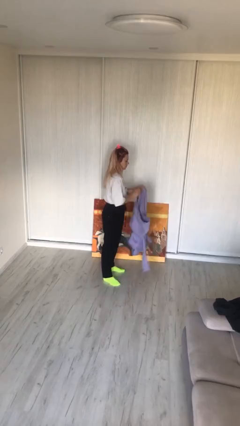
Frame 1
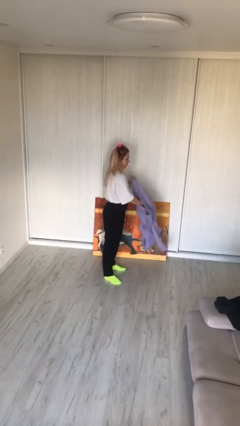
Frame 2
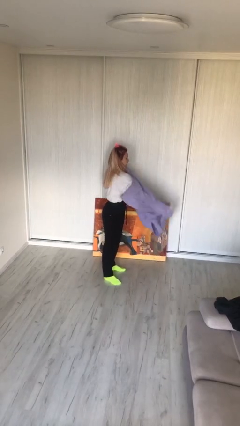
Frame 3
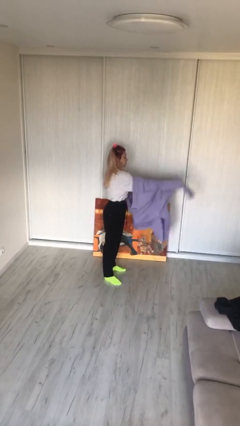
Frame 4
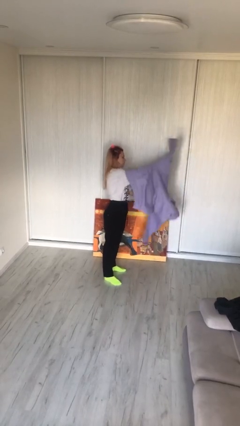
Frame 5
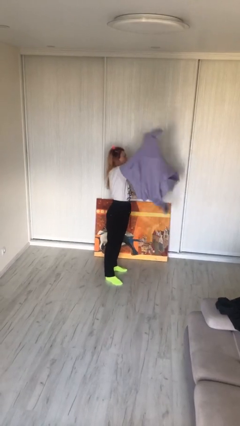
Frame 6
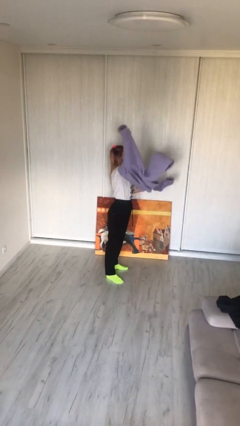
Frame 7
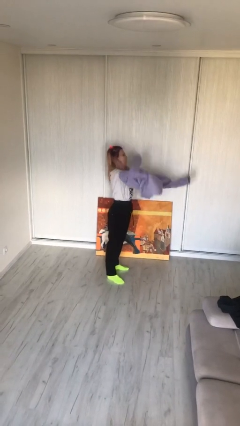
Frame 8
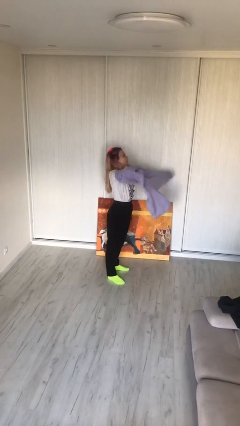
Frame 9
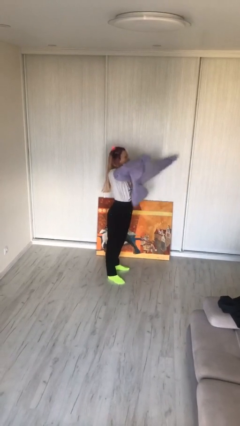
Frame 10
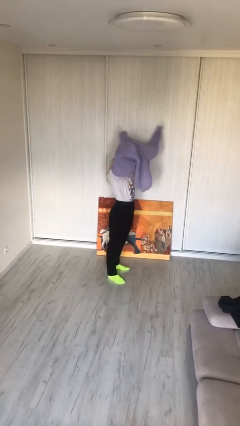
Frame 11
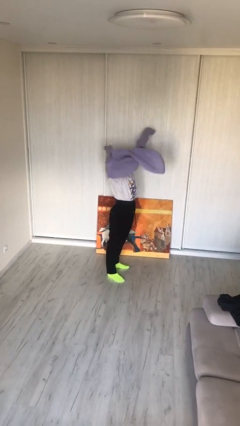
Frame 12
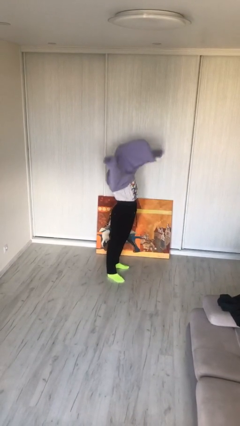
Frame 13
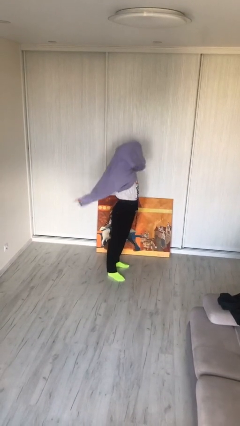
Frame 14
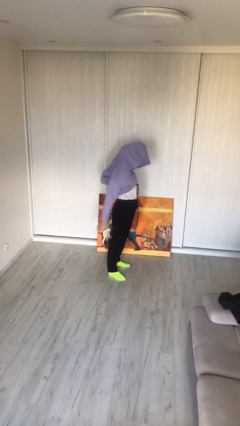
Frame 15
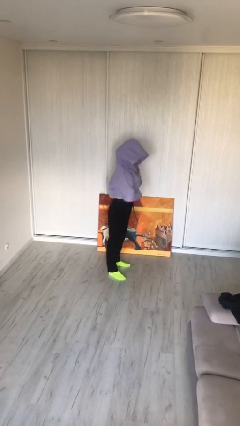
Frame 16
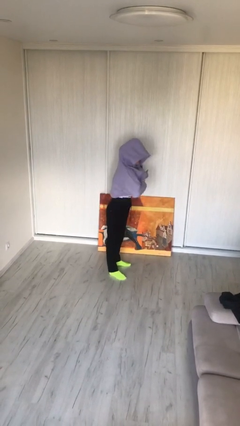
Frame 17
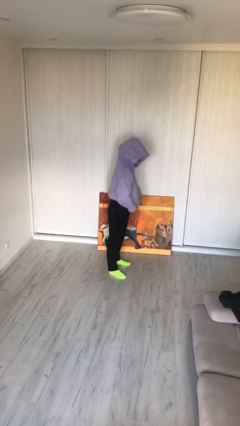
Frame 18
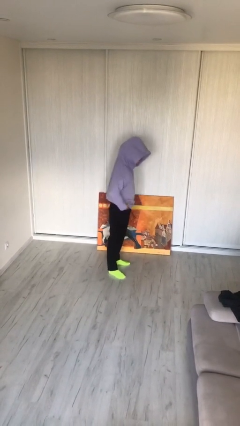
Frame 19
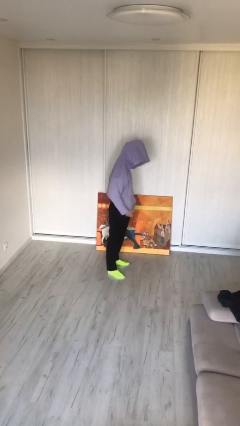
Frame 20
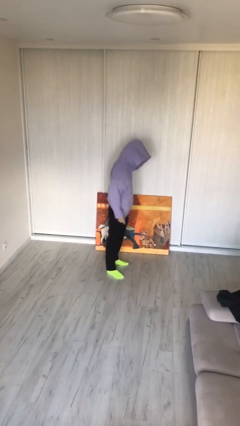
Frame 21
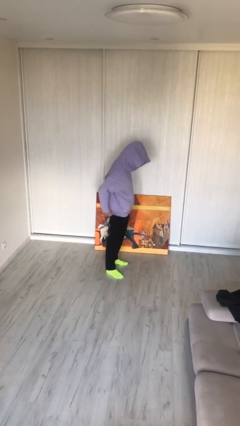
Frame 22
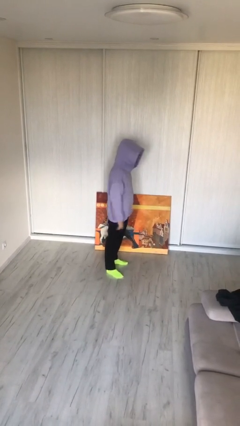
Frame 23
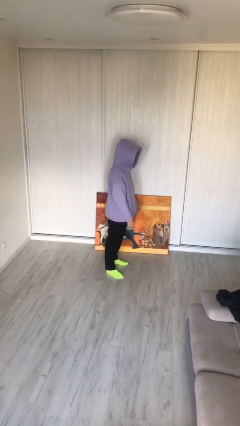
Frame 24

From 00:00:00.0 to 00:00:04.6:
person puts on hoodie

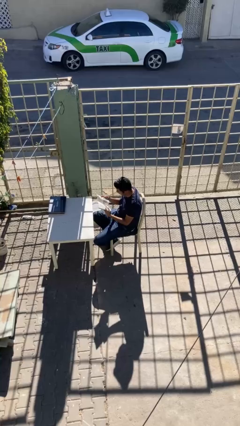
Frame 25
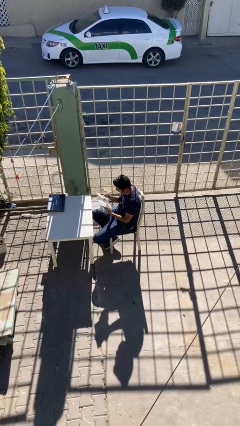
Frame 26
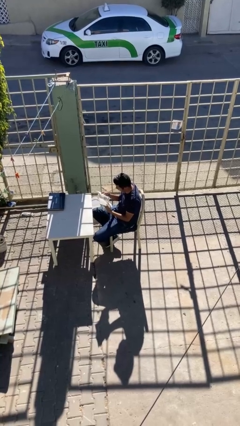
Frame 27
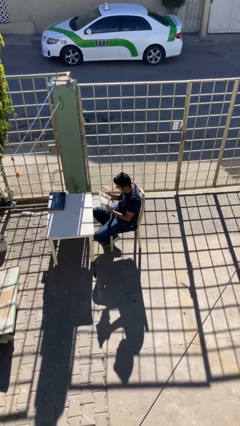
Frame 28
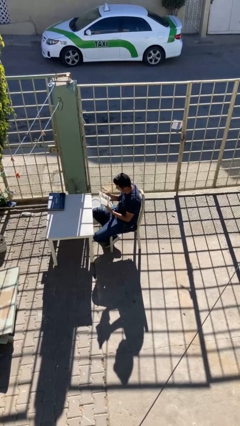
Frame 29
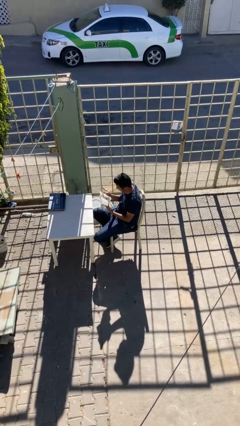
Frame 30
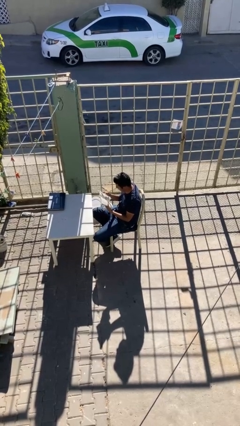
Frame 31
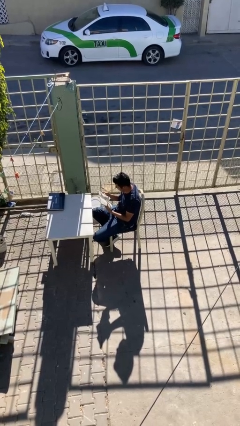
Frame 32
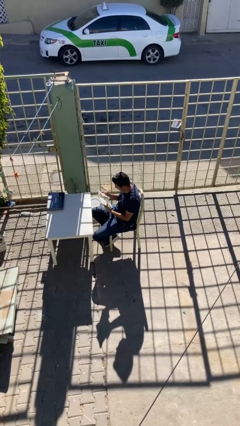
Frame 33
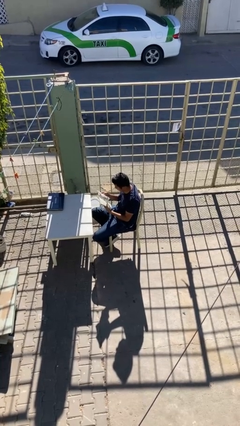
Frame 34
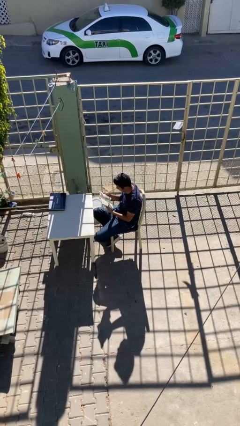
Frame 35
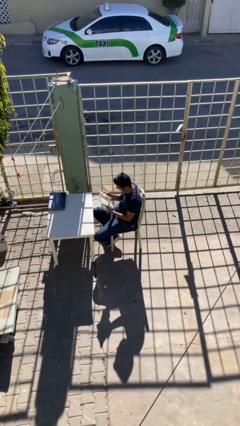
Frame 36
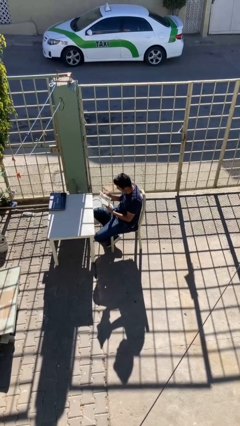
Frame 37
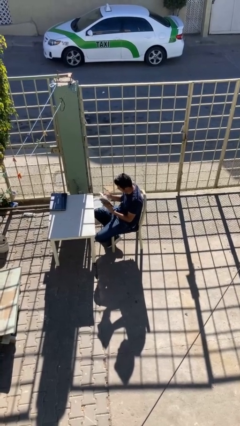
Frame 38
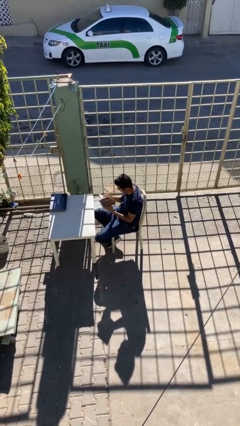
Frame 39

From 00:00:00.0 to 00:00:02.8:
person reads document

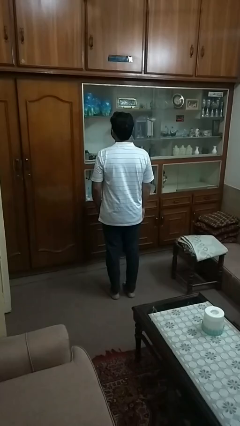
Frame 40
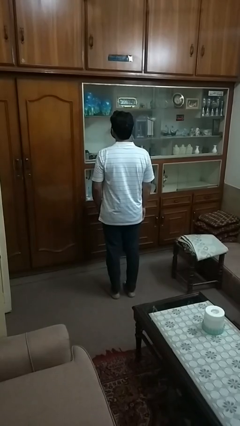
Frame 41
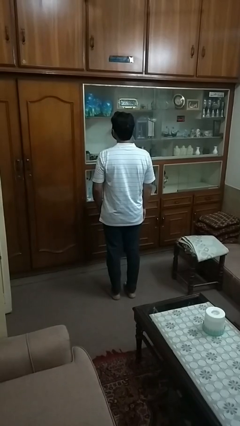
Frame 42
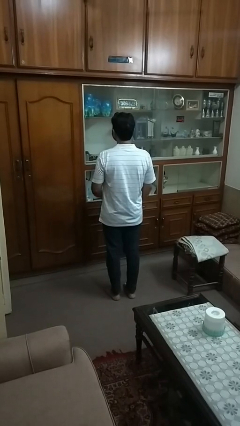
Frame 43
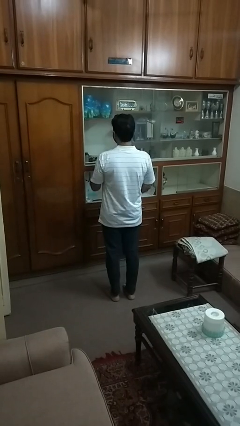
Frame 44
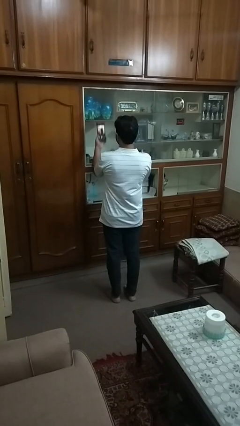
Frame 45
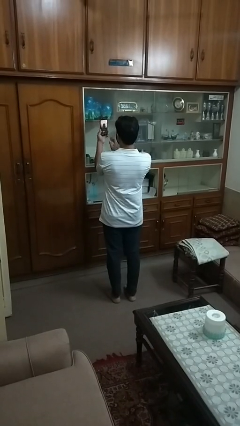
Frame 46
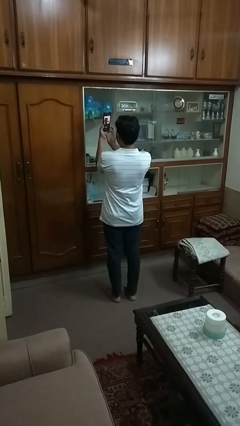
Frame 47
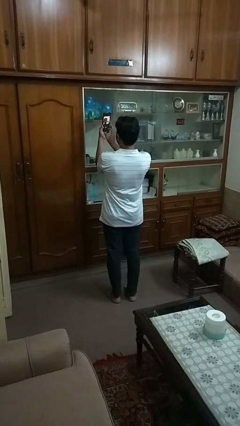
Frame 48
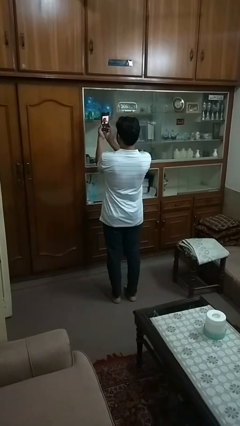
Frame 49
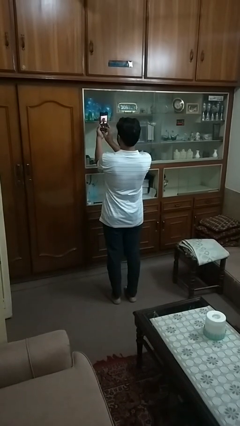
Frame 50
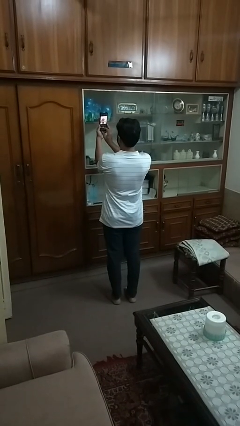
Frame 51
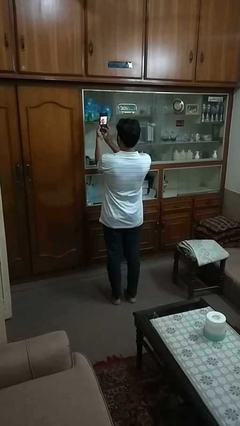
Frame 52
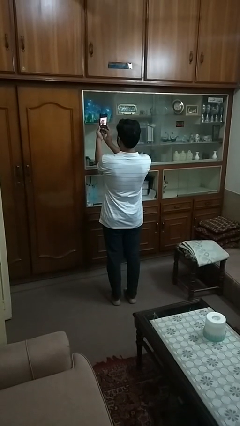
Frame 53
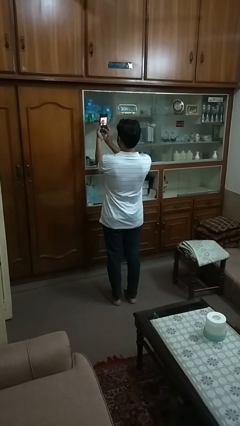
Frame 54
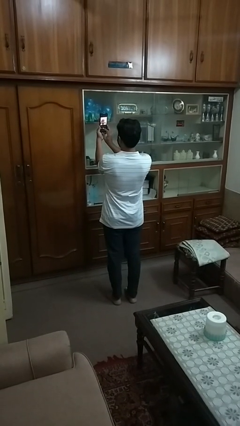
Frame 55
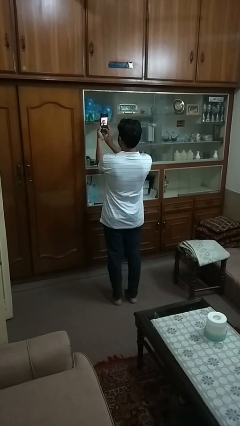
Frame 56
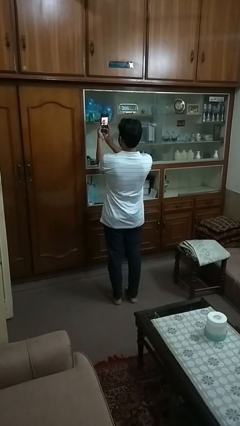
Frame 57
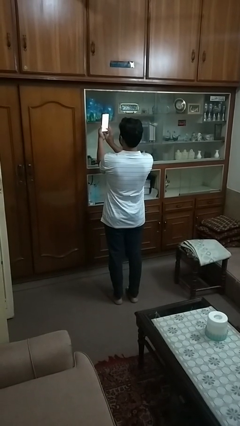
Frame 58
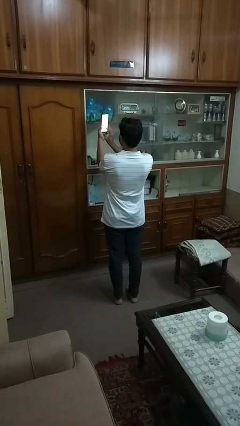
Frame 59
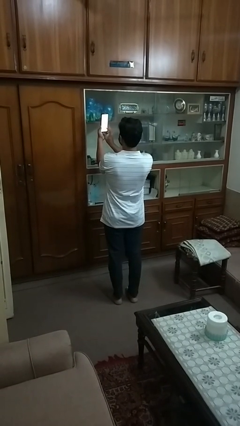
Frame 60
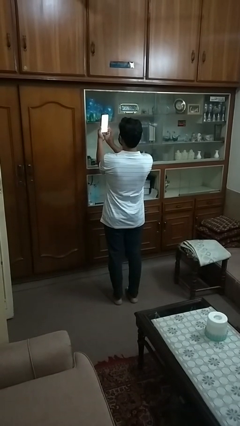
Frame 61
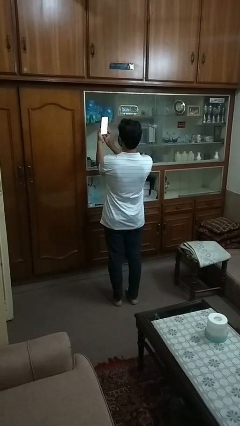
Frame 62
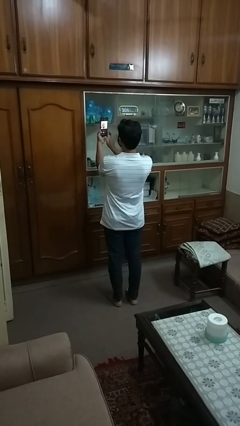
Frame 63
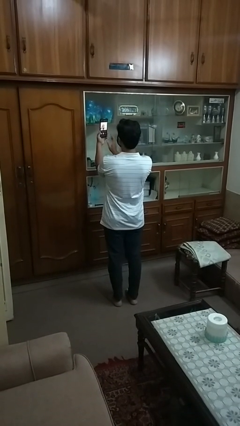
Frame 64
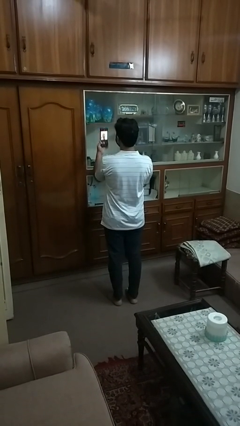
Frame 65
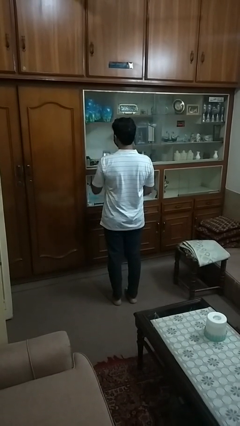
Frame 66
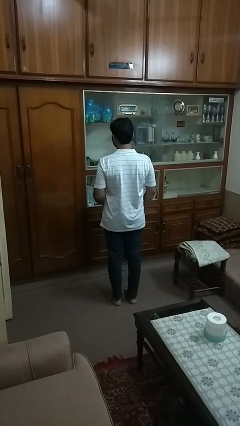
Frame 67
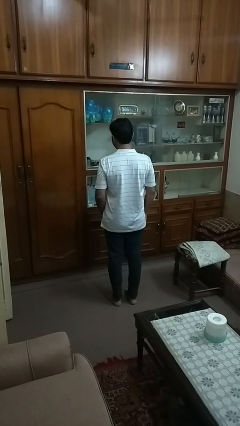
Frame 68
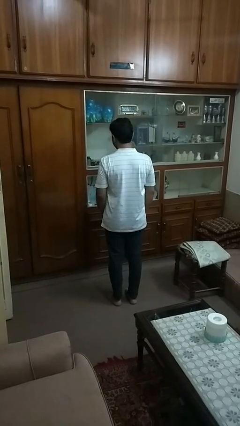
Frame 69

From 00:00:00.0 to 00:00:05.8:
person takes selfie

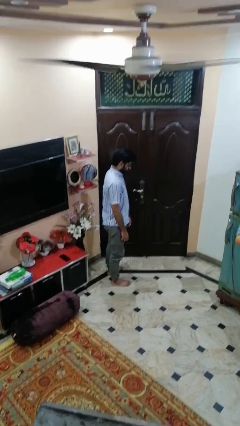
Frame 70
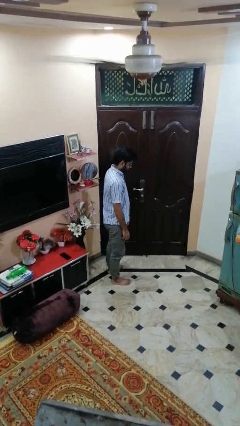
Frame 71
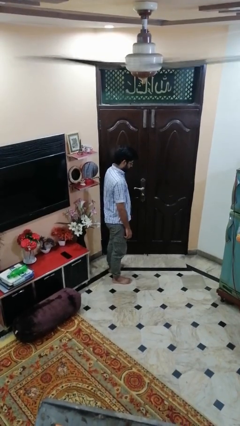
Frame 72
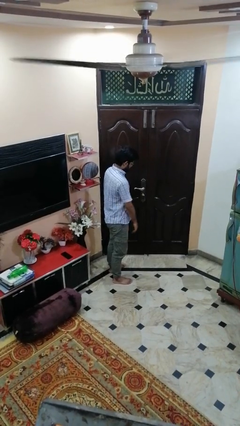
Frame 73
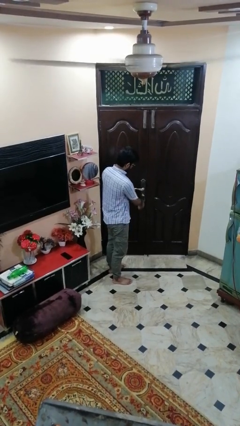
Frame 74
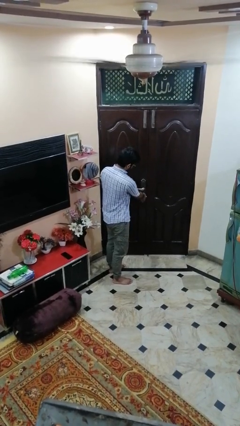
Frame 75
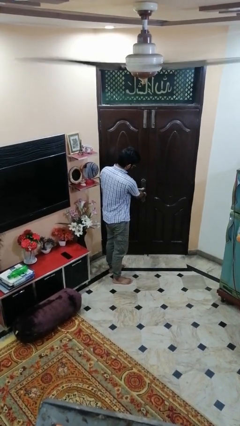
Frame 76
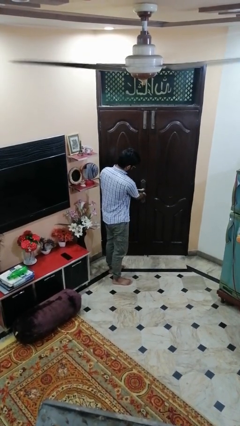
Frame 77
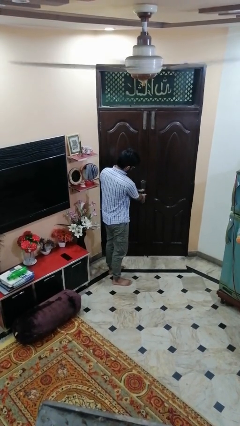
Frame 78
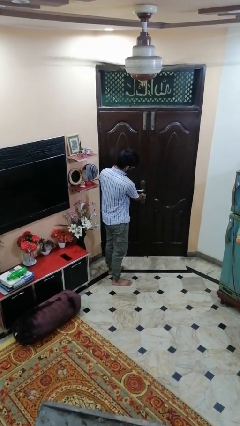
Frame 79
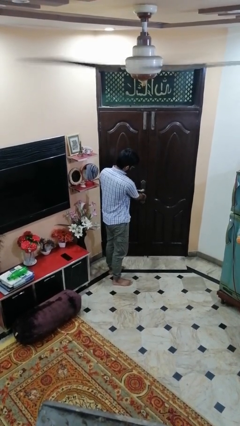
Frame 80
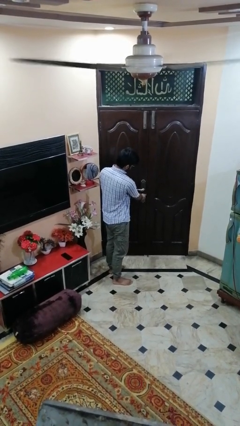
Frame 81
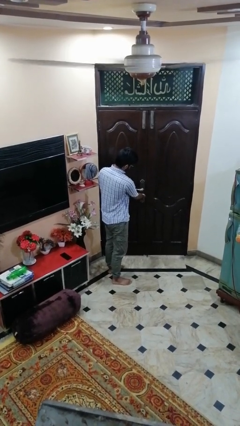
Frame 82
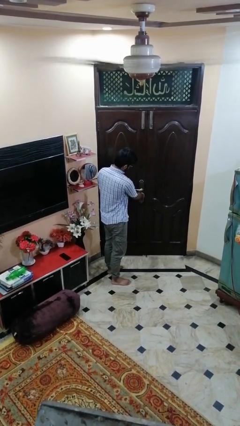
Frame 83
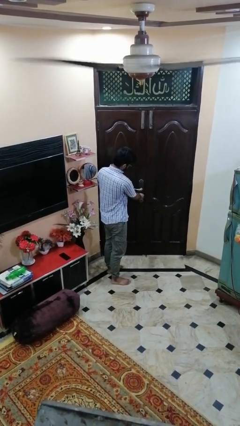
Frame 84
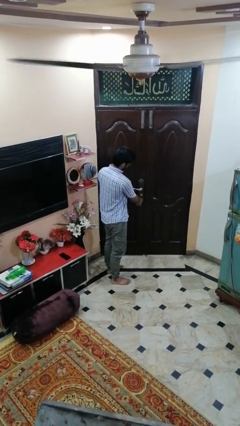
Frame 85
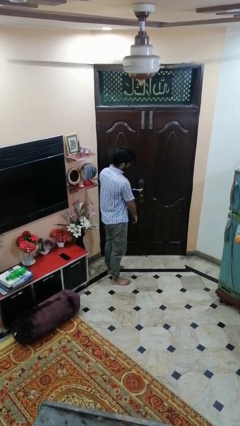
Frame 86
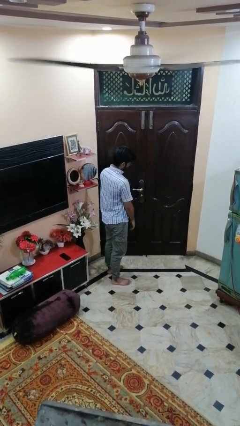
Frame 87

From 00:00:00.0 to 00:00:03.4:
person unlocks door with keys

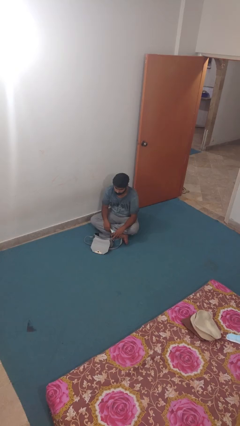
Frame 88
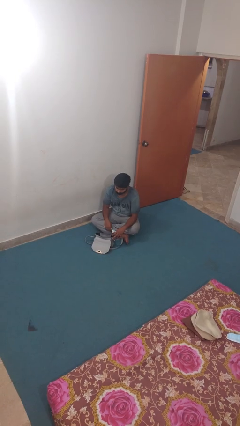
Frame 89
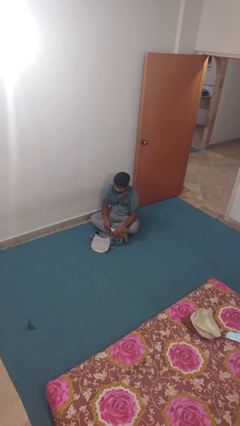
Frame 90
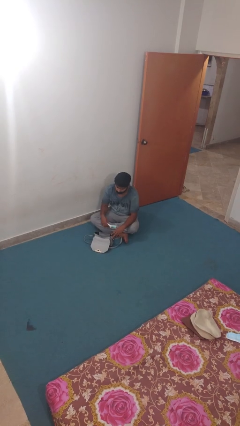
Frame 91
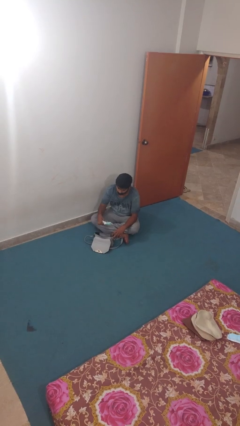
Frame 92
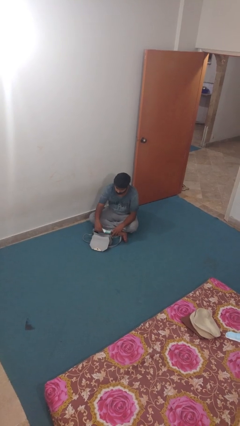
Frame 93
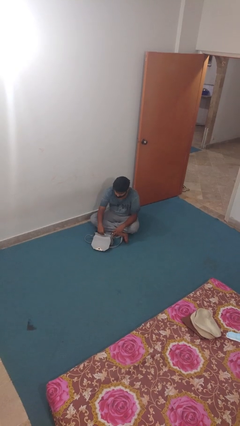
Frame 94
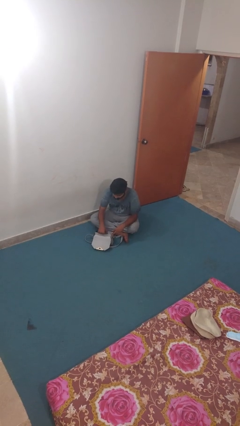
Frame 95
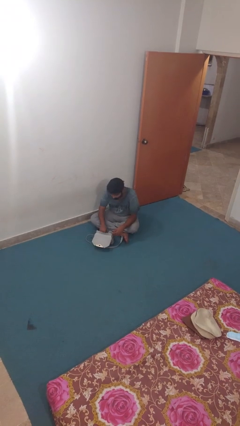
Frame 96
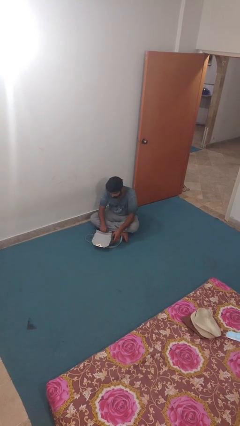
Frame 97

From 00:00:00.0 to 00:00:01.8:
person puts object into purse
